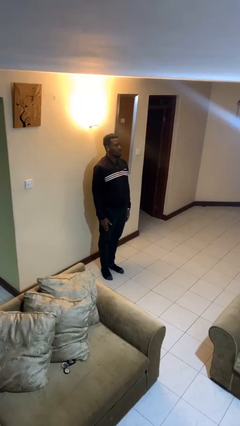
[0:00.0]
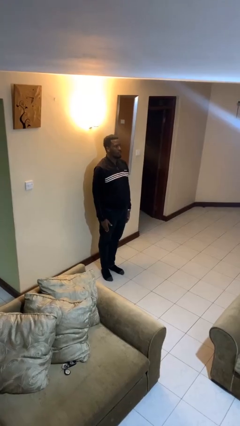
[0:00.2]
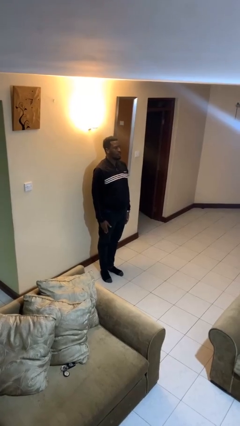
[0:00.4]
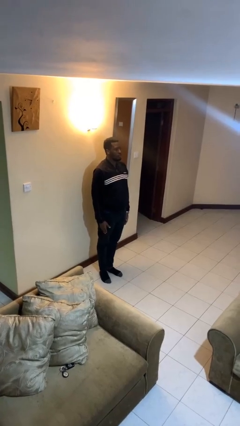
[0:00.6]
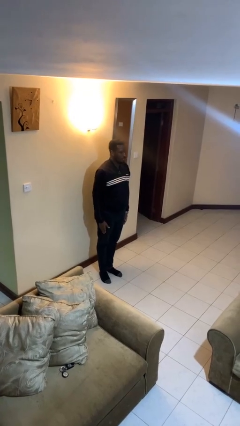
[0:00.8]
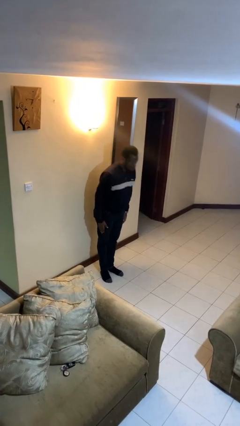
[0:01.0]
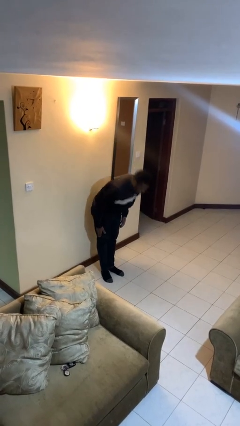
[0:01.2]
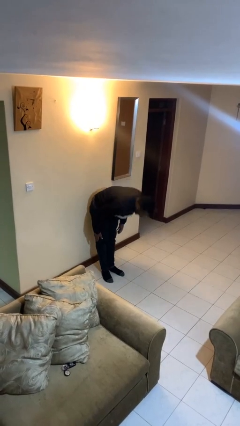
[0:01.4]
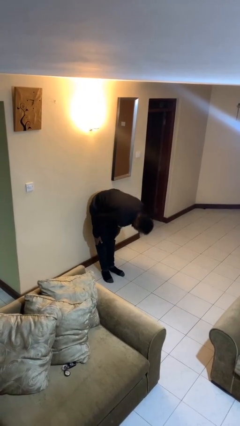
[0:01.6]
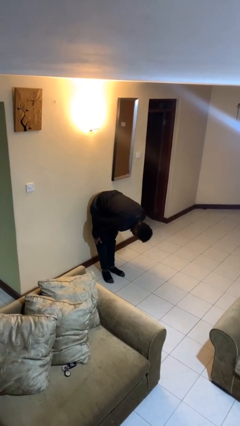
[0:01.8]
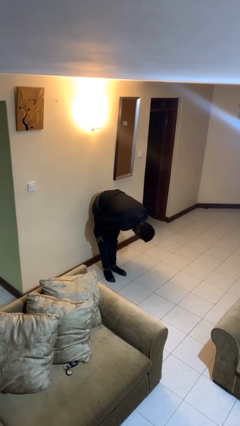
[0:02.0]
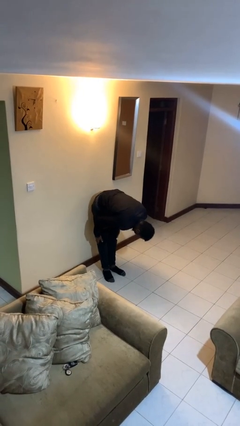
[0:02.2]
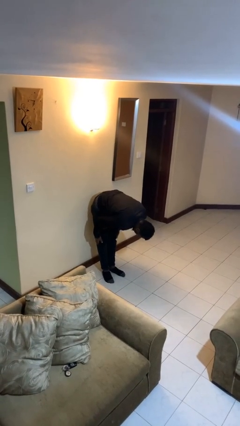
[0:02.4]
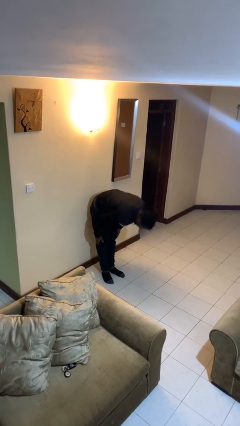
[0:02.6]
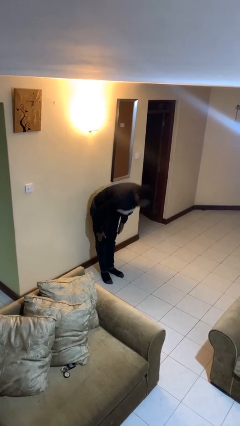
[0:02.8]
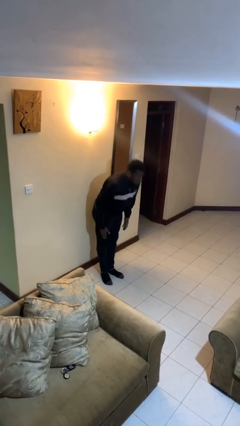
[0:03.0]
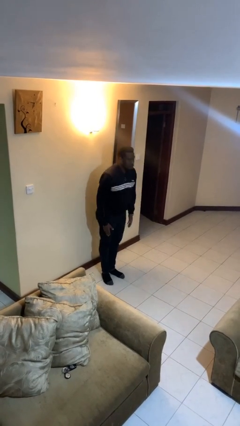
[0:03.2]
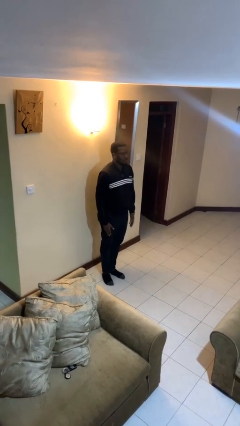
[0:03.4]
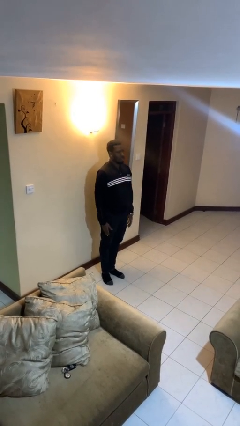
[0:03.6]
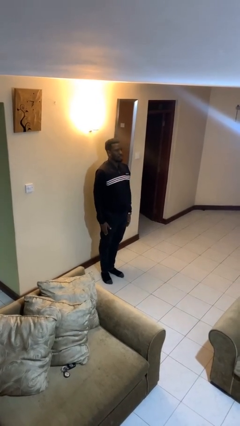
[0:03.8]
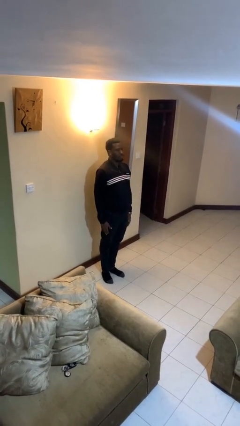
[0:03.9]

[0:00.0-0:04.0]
person bows

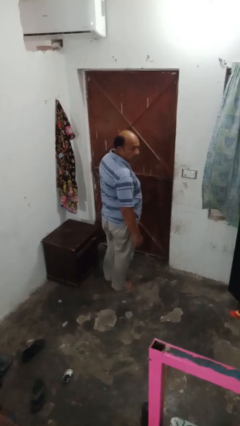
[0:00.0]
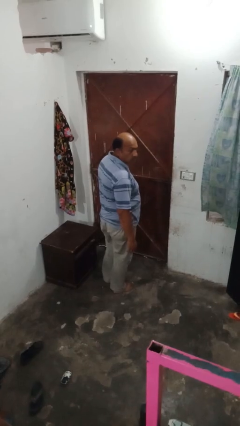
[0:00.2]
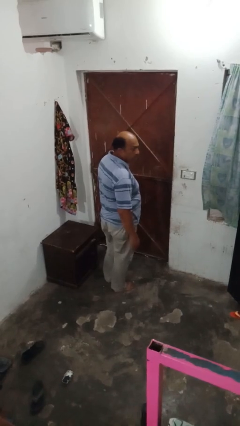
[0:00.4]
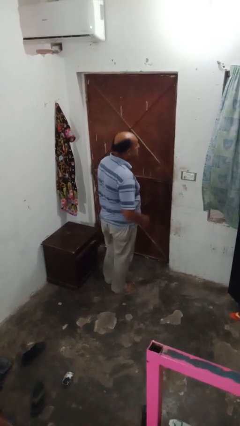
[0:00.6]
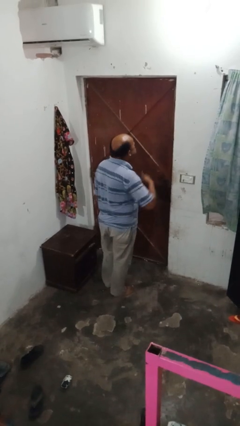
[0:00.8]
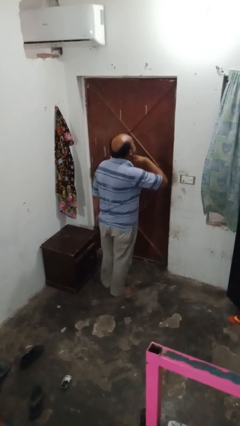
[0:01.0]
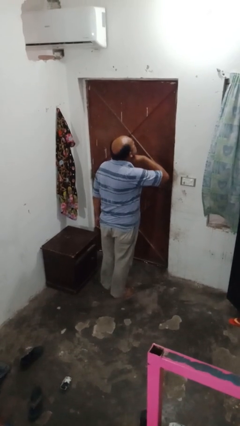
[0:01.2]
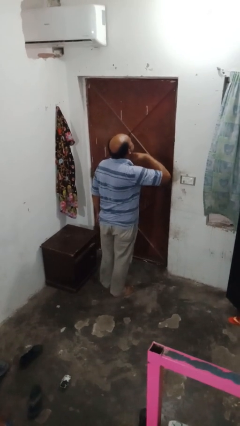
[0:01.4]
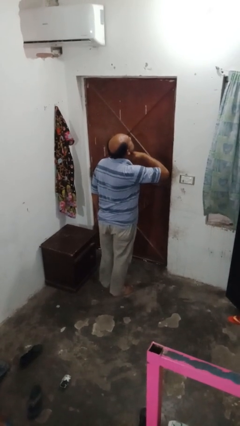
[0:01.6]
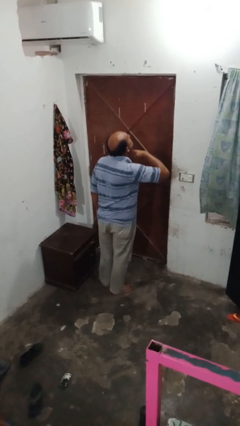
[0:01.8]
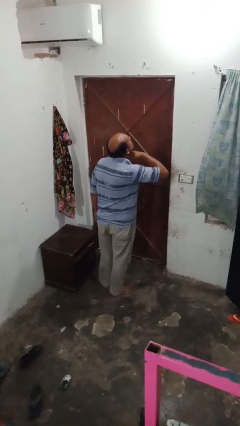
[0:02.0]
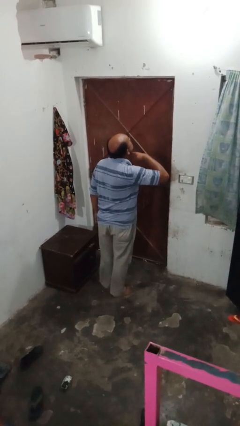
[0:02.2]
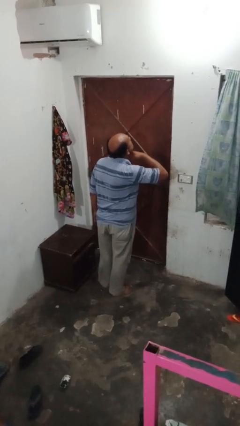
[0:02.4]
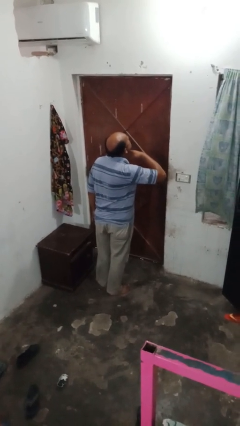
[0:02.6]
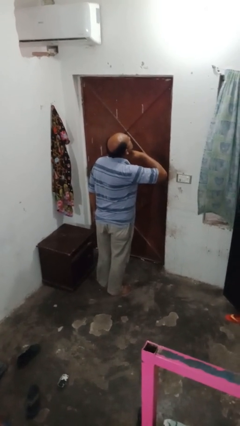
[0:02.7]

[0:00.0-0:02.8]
person gestures cut

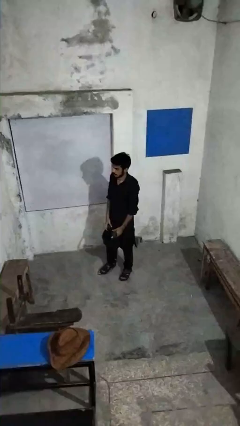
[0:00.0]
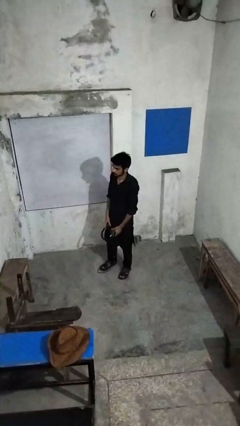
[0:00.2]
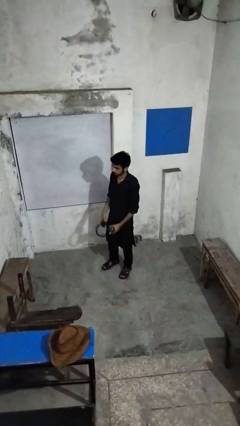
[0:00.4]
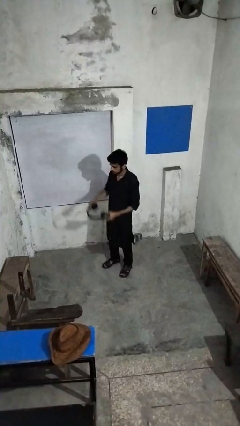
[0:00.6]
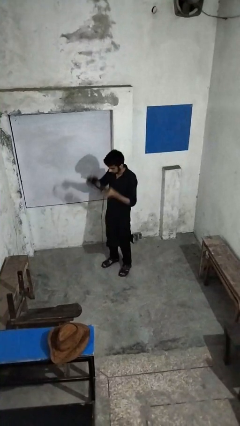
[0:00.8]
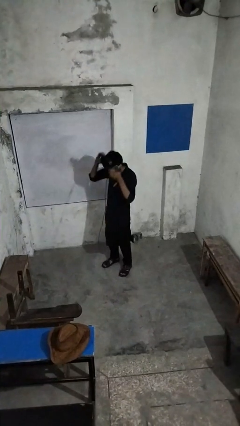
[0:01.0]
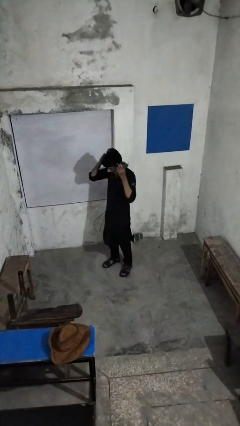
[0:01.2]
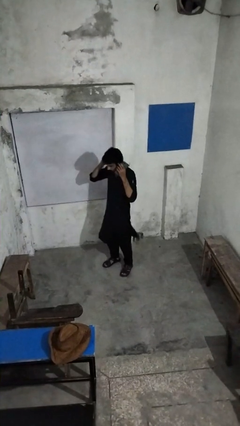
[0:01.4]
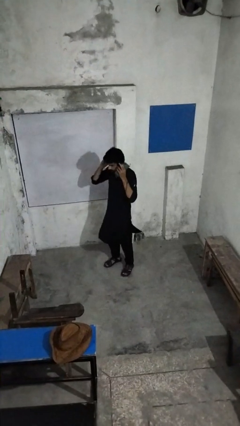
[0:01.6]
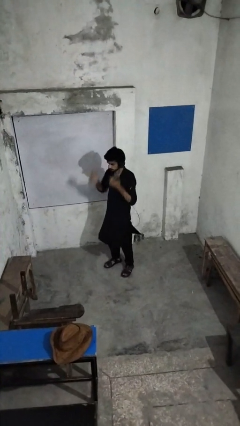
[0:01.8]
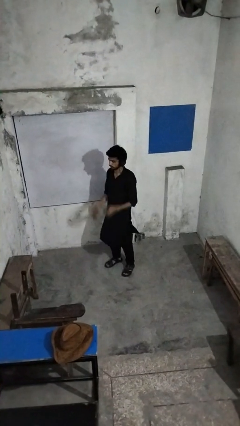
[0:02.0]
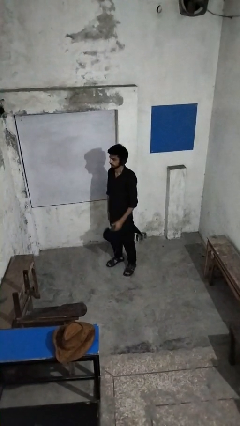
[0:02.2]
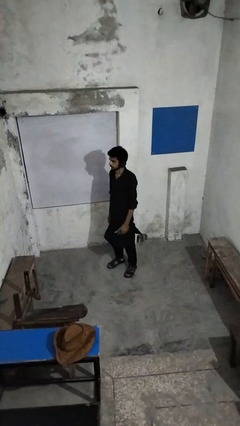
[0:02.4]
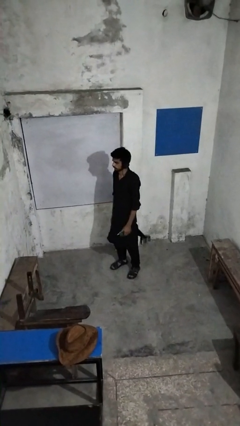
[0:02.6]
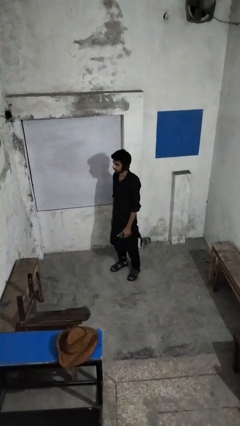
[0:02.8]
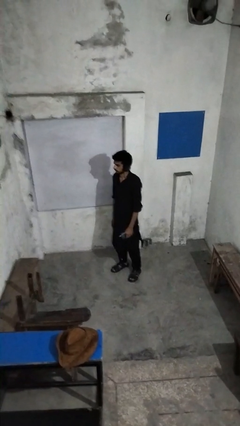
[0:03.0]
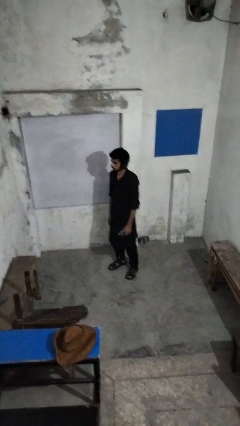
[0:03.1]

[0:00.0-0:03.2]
person puts on headphones

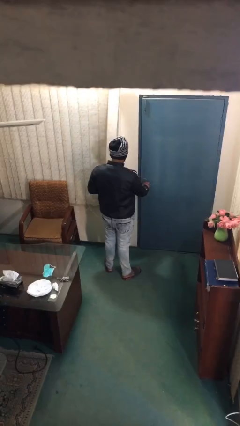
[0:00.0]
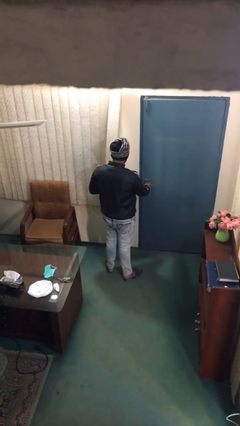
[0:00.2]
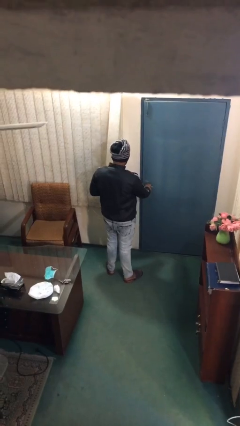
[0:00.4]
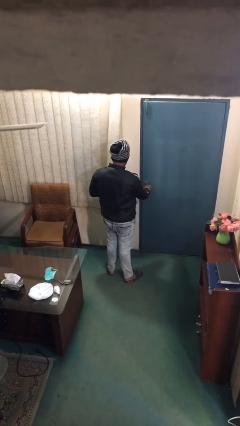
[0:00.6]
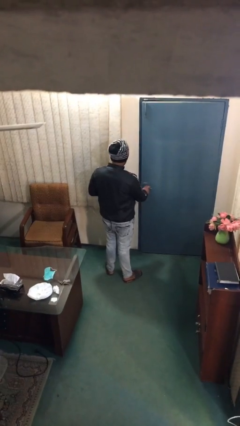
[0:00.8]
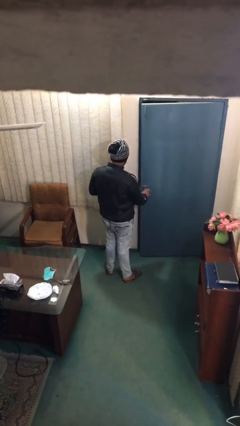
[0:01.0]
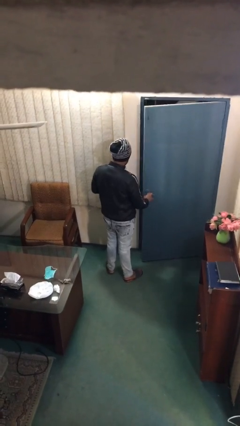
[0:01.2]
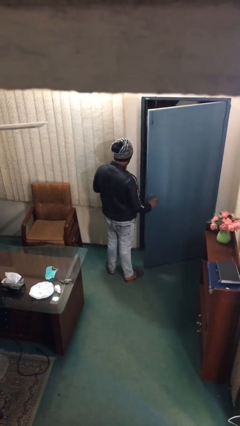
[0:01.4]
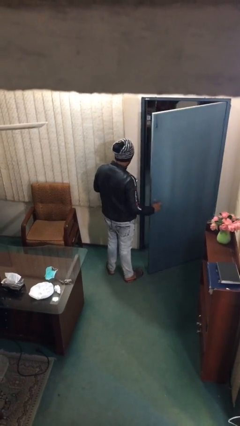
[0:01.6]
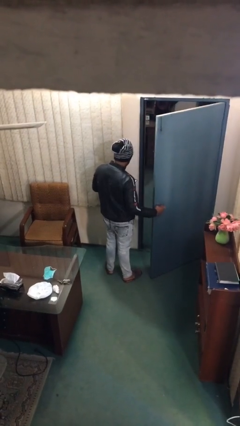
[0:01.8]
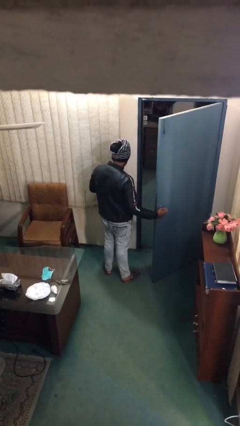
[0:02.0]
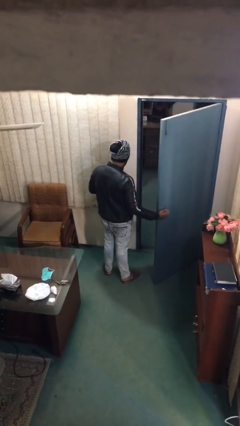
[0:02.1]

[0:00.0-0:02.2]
person opens facility door

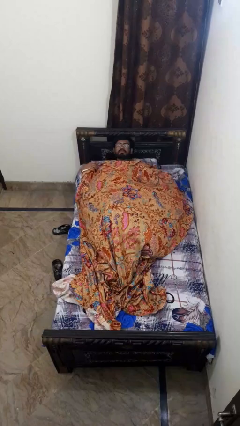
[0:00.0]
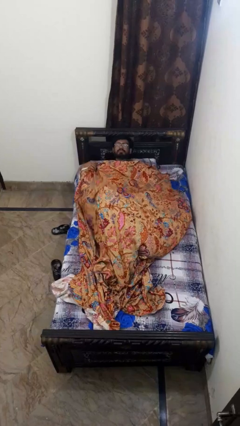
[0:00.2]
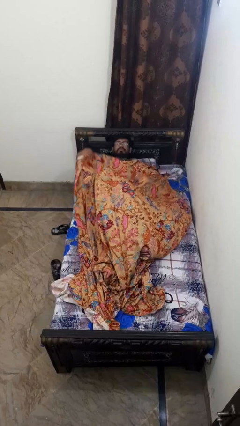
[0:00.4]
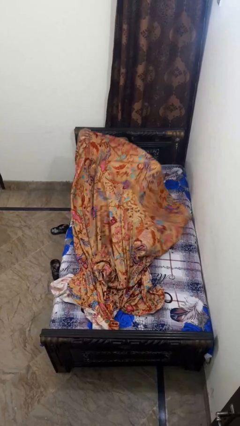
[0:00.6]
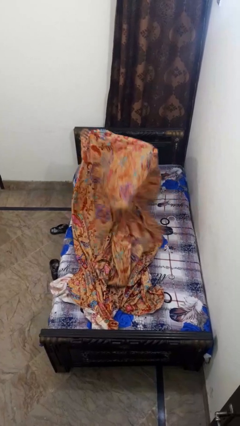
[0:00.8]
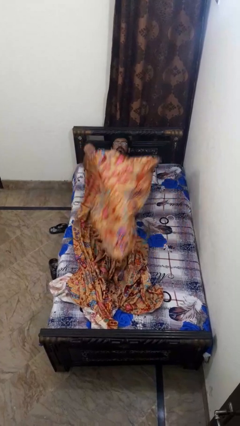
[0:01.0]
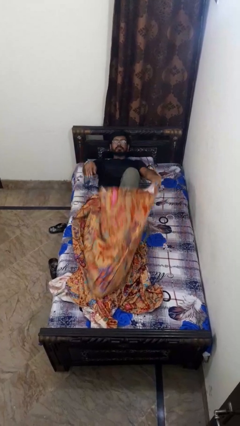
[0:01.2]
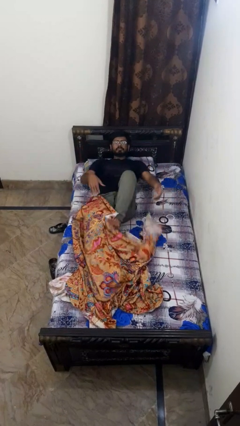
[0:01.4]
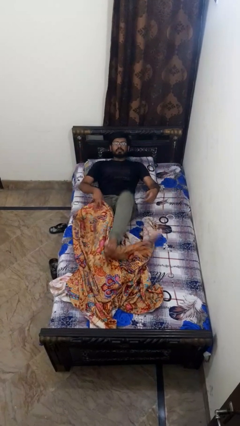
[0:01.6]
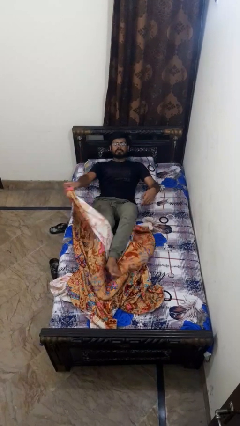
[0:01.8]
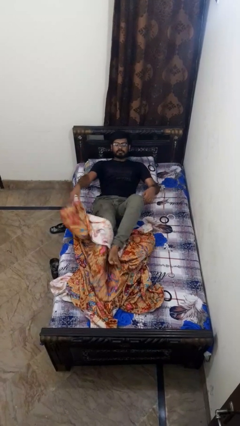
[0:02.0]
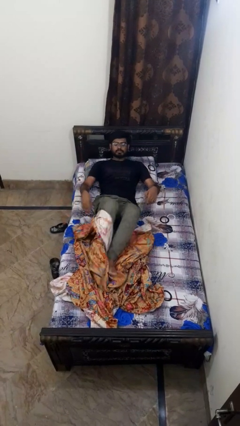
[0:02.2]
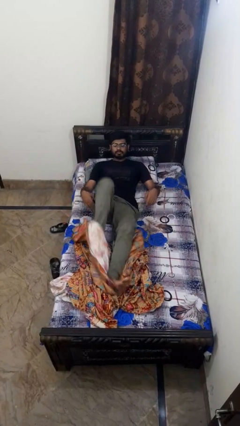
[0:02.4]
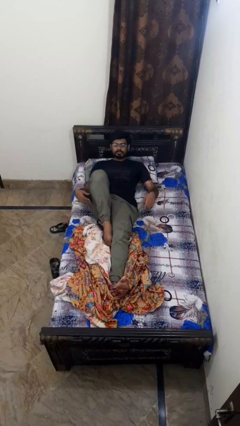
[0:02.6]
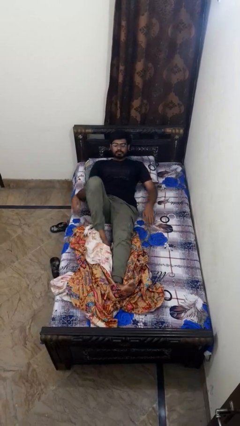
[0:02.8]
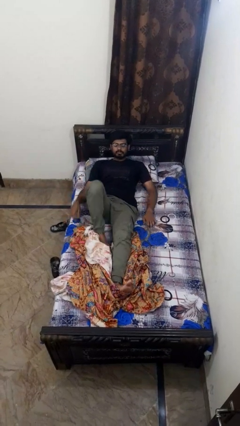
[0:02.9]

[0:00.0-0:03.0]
person uncovers with bedsheets

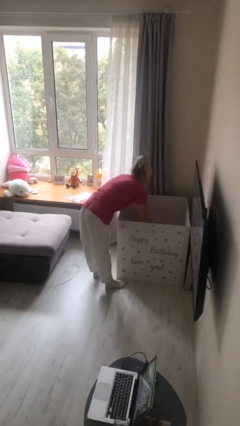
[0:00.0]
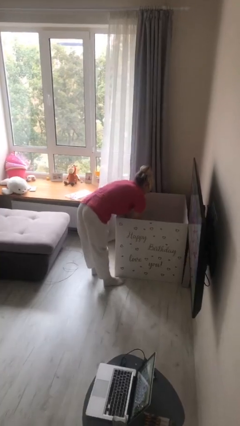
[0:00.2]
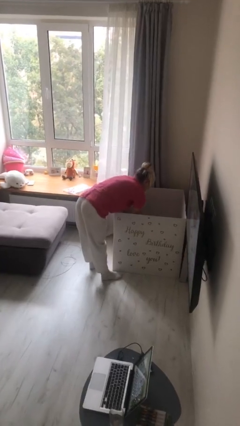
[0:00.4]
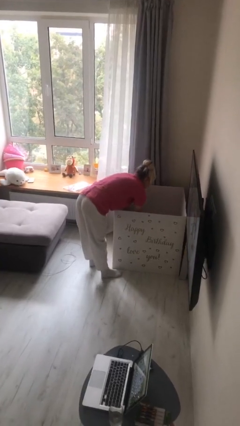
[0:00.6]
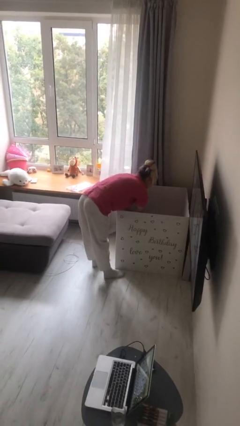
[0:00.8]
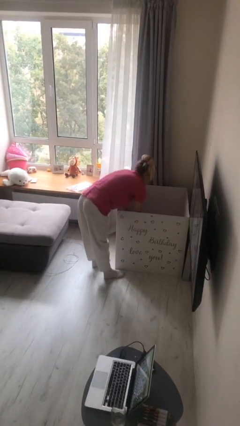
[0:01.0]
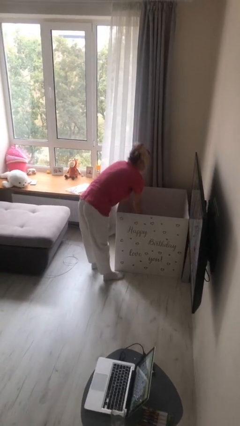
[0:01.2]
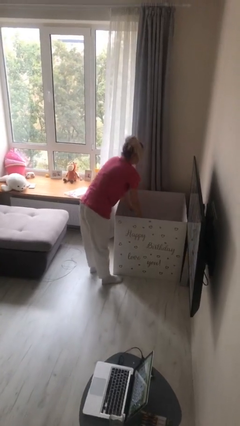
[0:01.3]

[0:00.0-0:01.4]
person searches in box

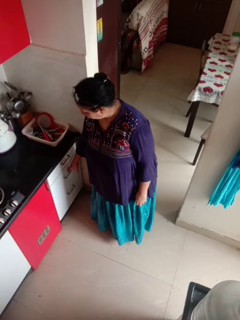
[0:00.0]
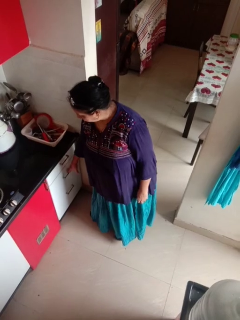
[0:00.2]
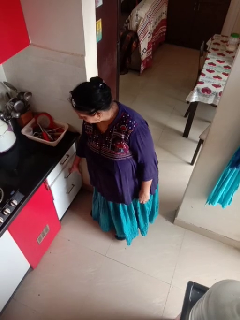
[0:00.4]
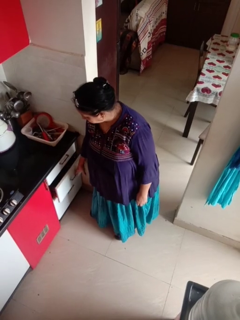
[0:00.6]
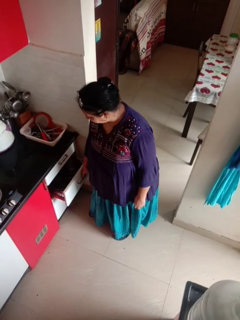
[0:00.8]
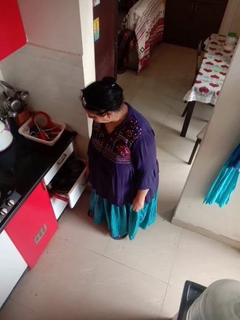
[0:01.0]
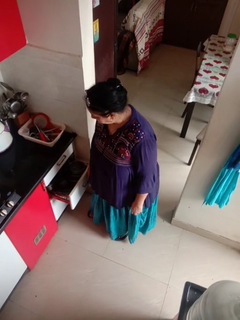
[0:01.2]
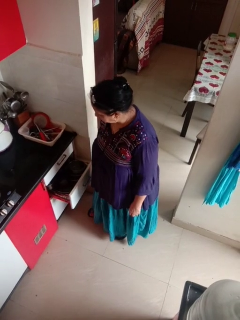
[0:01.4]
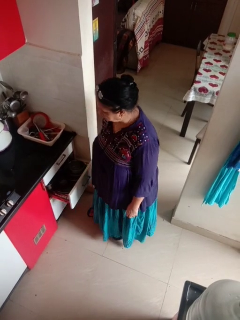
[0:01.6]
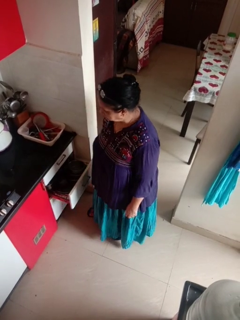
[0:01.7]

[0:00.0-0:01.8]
person opens kitchen drawer
